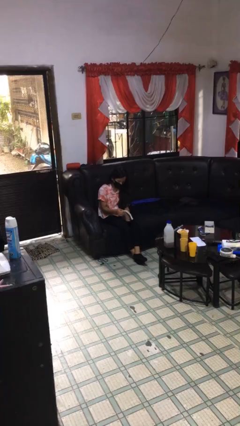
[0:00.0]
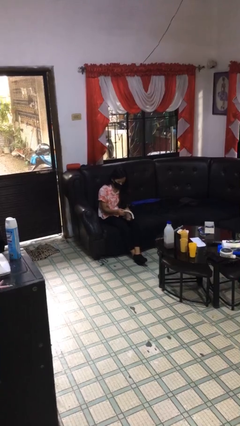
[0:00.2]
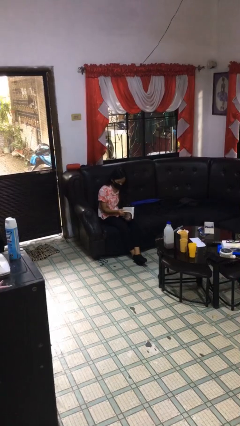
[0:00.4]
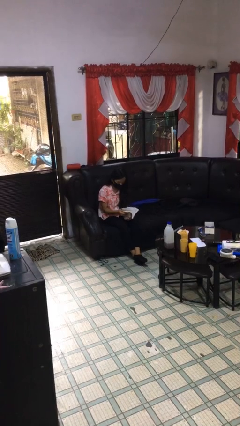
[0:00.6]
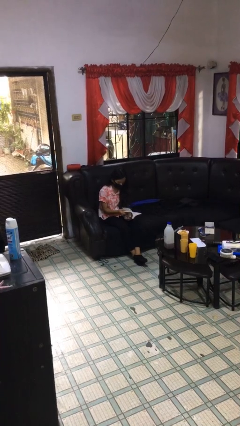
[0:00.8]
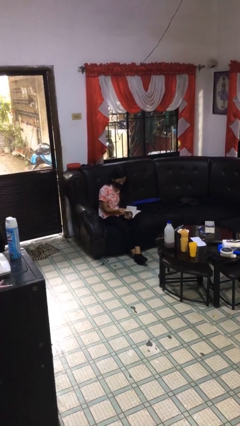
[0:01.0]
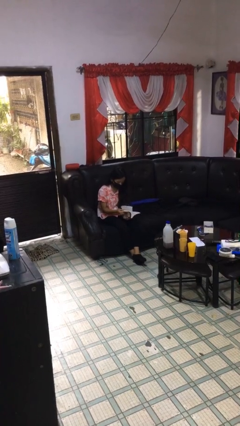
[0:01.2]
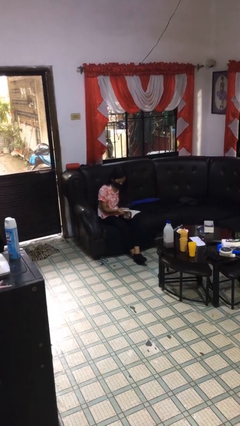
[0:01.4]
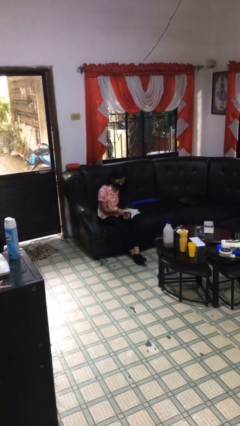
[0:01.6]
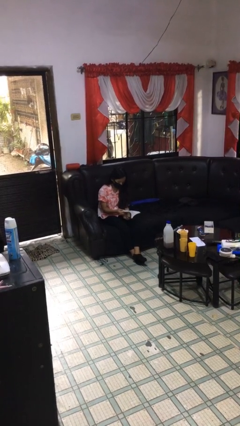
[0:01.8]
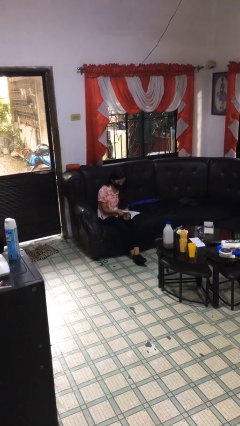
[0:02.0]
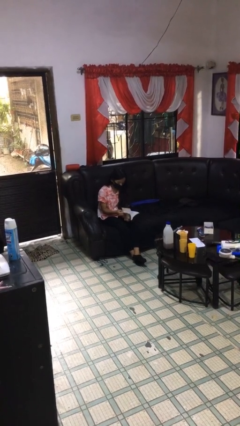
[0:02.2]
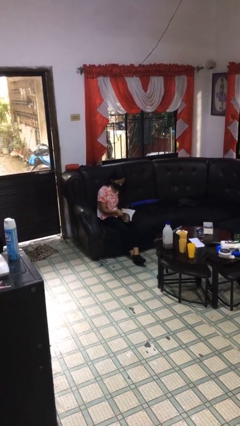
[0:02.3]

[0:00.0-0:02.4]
person reads document

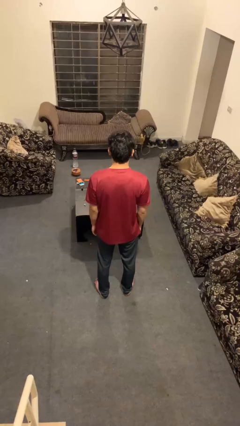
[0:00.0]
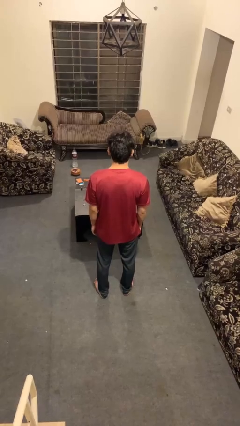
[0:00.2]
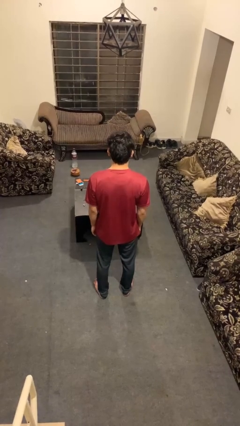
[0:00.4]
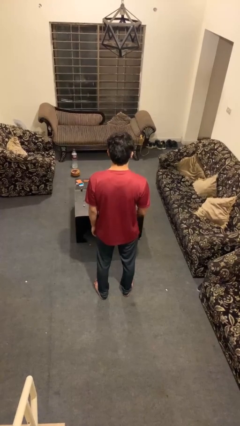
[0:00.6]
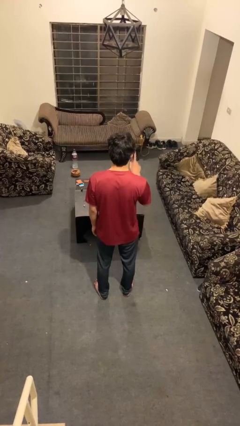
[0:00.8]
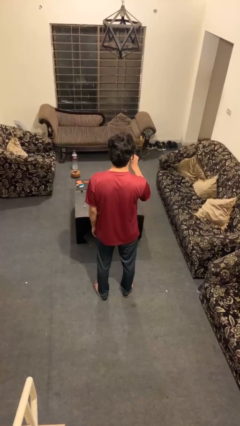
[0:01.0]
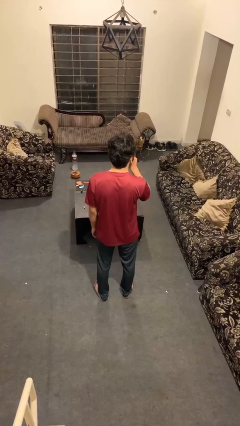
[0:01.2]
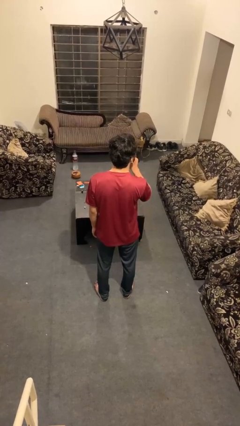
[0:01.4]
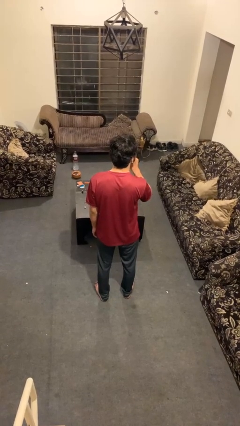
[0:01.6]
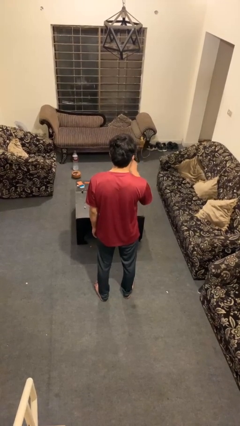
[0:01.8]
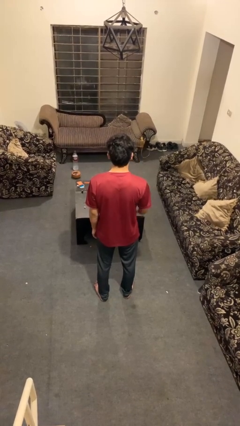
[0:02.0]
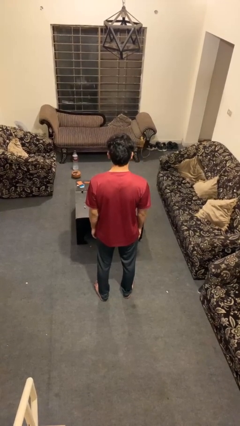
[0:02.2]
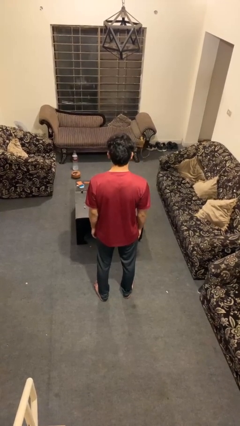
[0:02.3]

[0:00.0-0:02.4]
person gestures be quiet

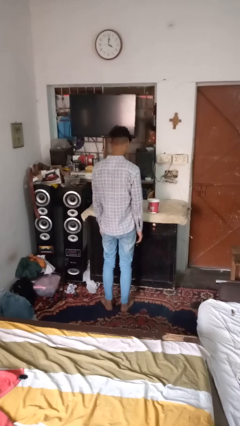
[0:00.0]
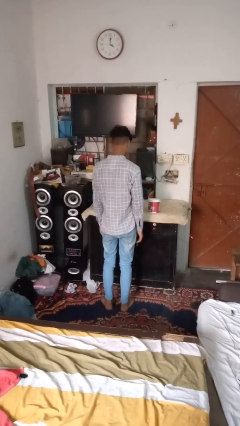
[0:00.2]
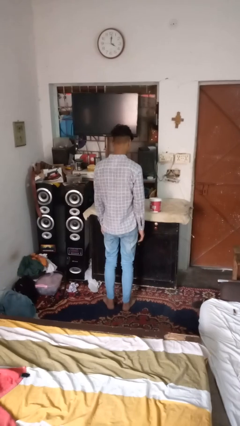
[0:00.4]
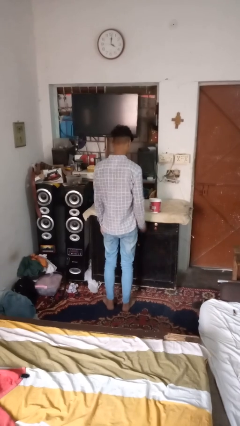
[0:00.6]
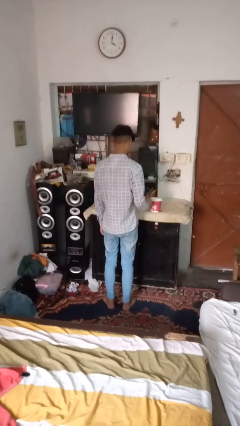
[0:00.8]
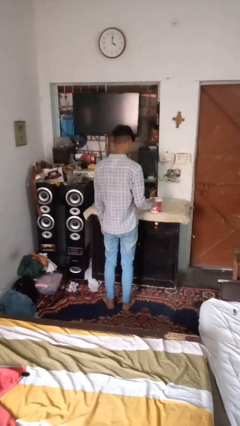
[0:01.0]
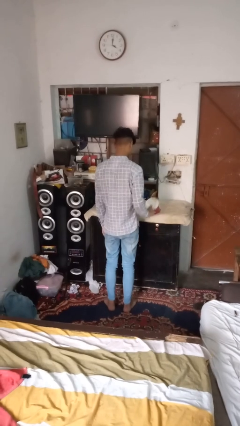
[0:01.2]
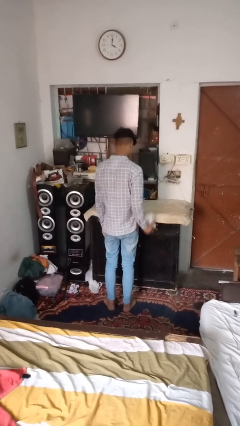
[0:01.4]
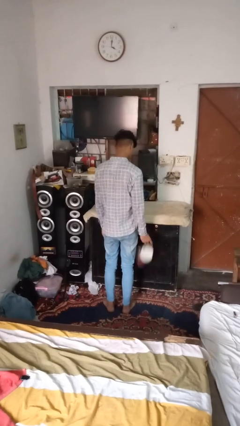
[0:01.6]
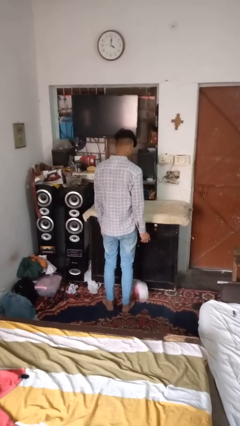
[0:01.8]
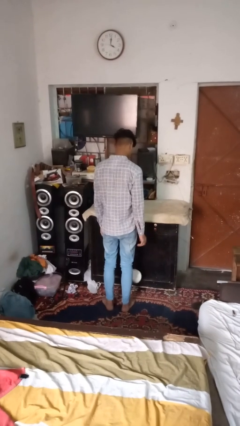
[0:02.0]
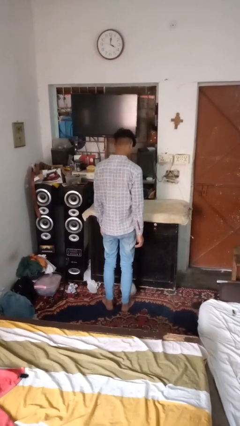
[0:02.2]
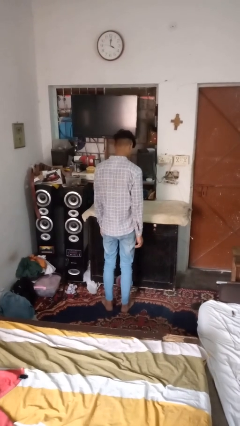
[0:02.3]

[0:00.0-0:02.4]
person knocks over furniture

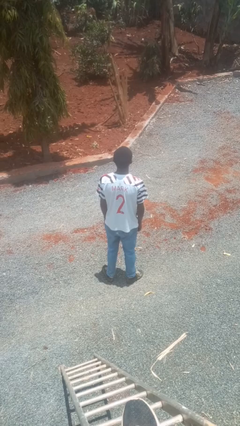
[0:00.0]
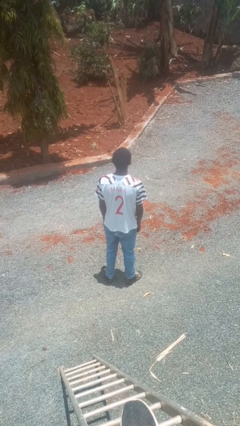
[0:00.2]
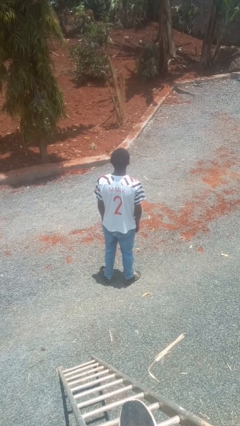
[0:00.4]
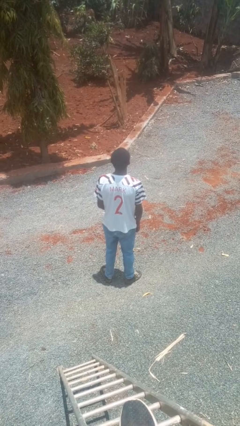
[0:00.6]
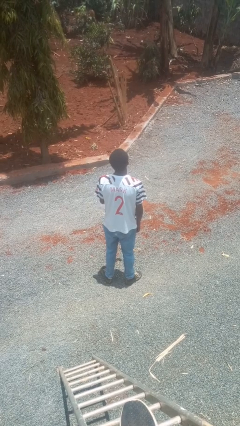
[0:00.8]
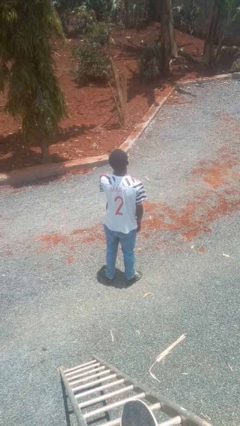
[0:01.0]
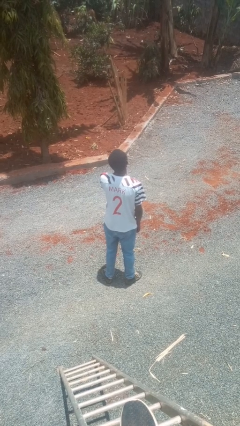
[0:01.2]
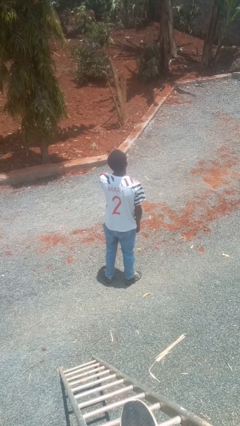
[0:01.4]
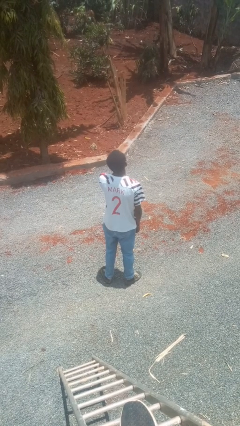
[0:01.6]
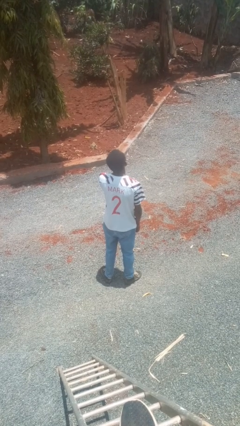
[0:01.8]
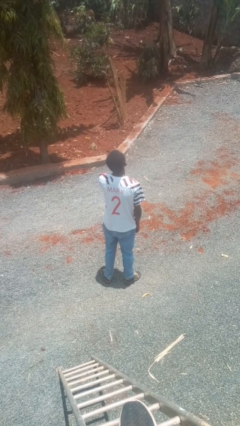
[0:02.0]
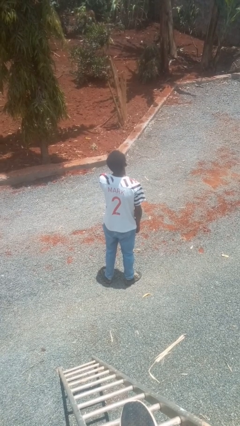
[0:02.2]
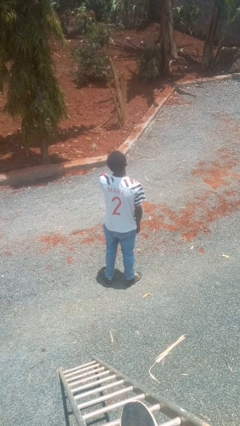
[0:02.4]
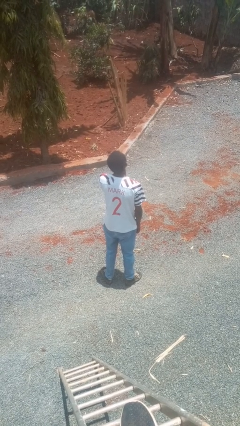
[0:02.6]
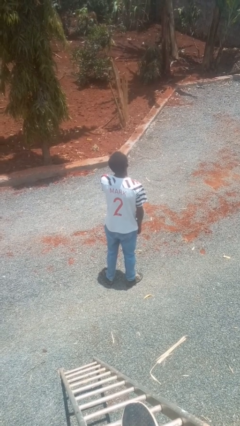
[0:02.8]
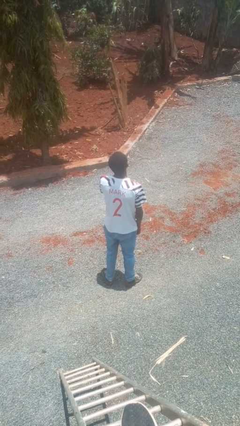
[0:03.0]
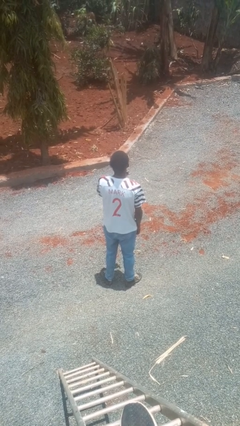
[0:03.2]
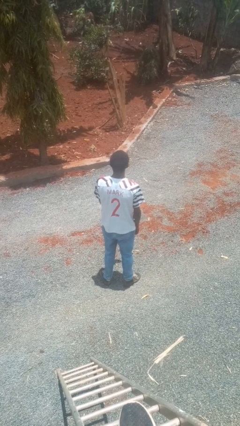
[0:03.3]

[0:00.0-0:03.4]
person strokes chin

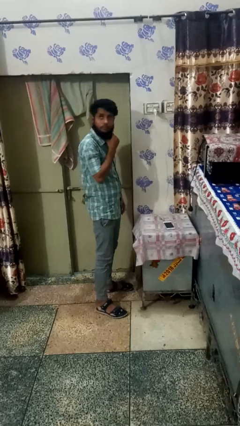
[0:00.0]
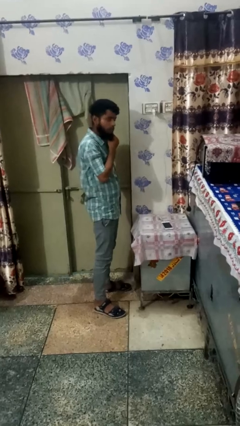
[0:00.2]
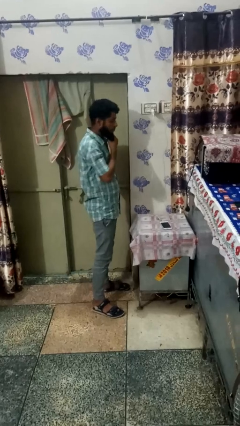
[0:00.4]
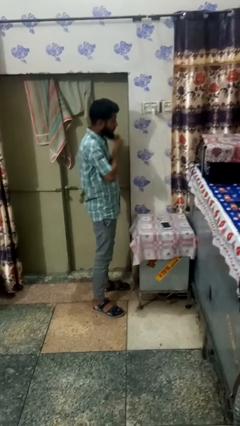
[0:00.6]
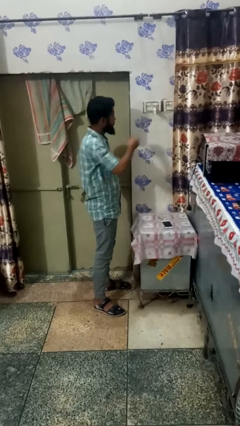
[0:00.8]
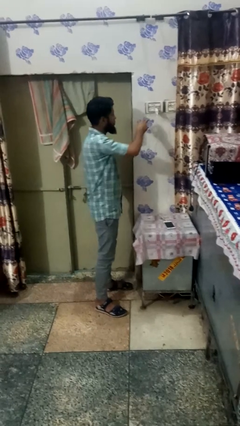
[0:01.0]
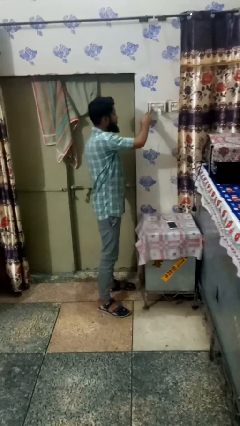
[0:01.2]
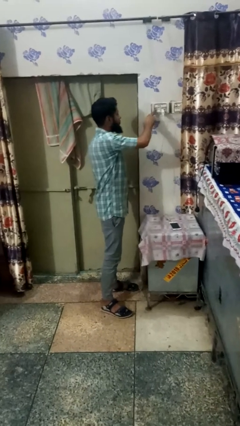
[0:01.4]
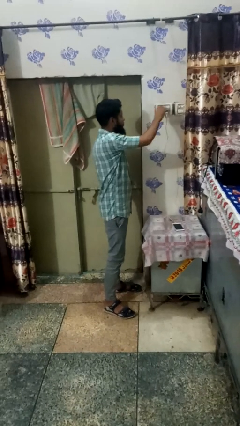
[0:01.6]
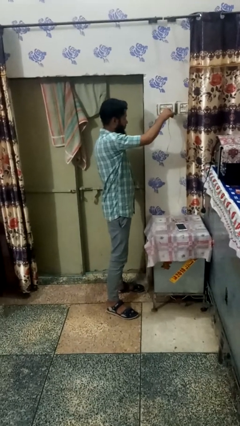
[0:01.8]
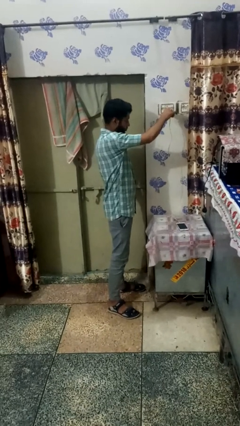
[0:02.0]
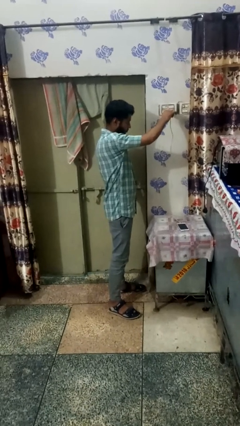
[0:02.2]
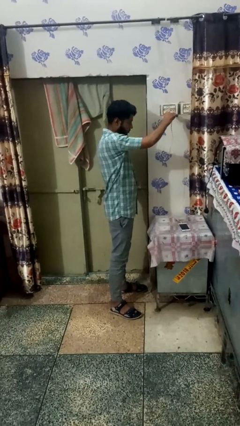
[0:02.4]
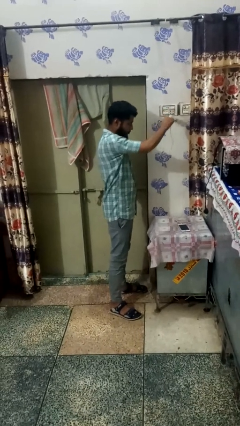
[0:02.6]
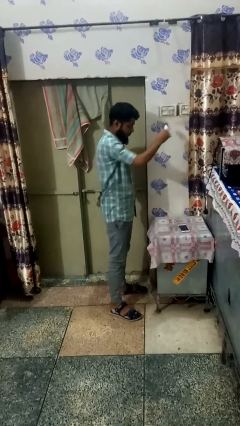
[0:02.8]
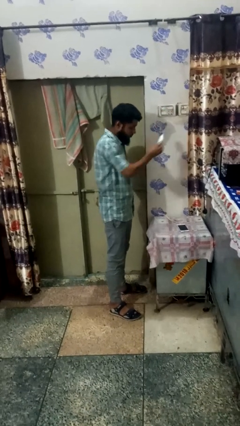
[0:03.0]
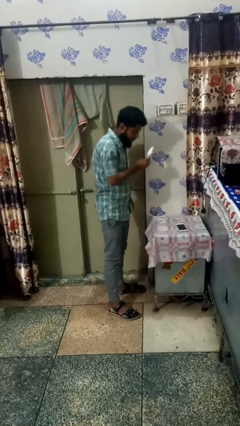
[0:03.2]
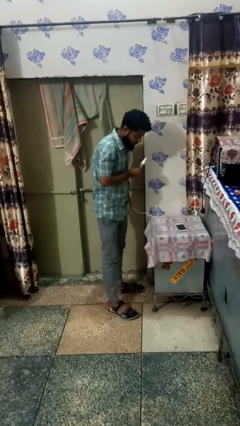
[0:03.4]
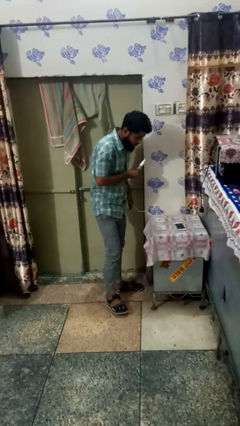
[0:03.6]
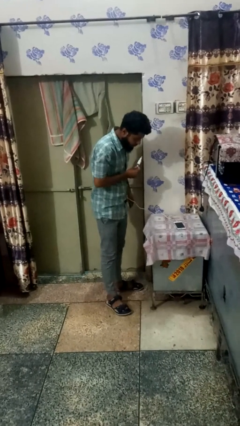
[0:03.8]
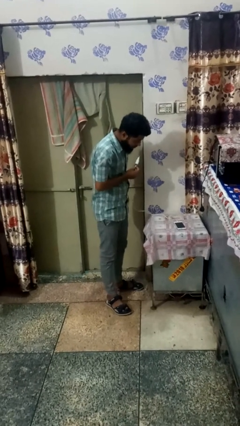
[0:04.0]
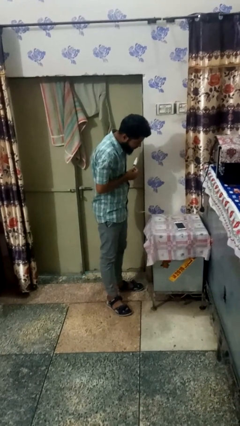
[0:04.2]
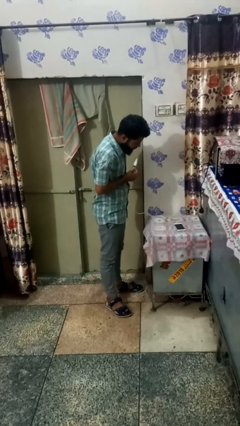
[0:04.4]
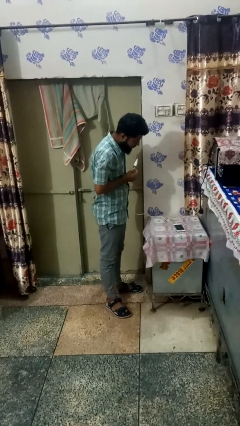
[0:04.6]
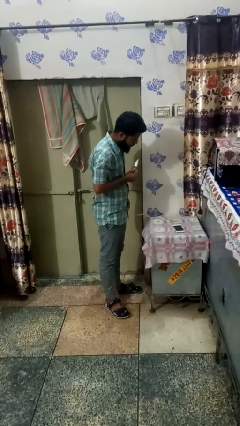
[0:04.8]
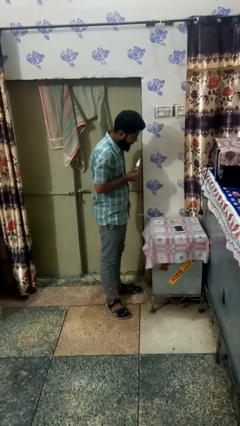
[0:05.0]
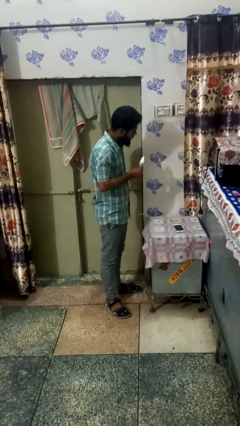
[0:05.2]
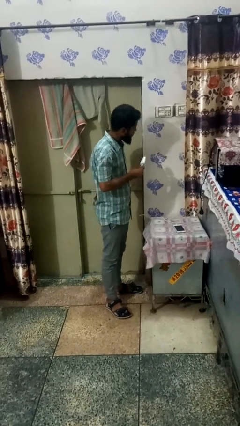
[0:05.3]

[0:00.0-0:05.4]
person unplugs from electrical socket

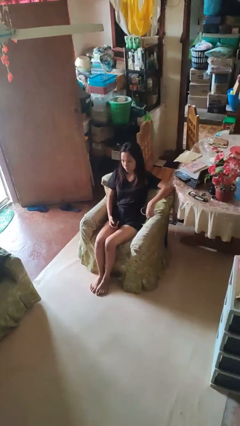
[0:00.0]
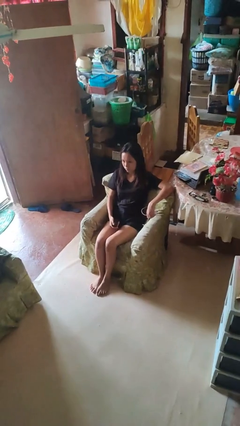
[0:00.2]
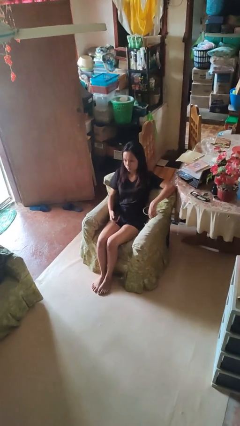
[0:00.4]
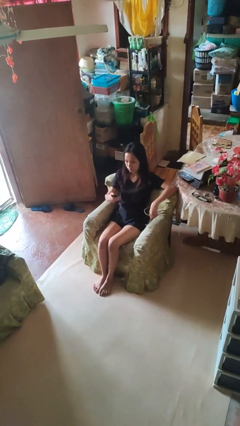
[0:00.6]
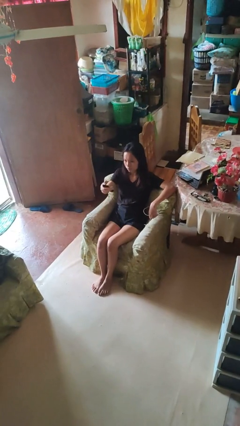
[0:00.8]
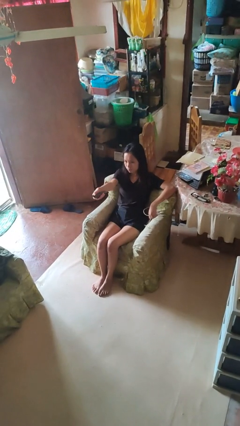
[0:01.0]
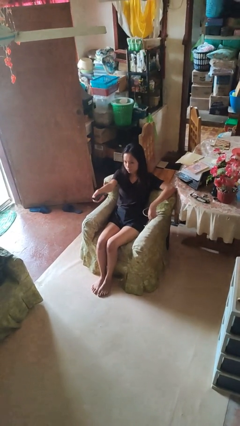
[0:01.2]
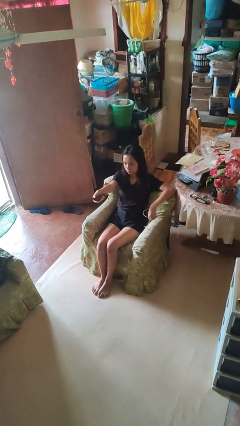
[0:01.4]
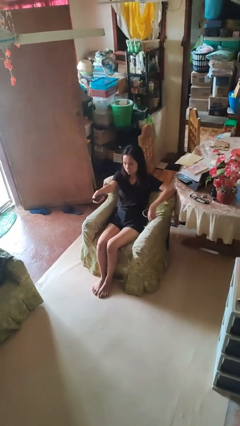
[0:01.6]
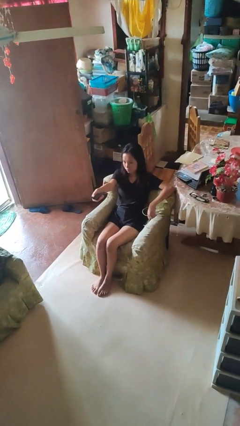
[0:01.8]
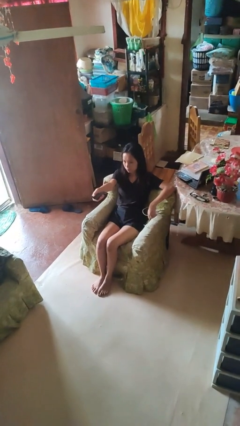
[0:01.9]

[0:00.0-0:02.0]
person uses television remote
